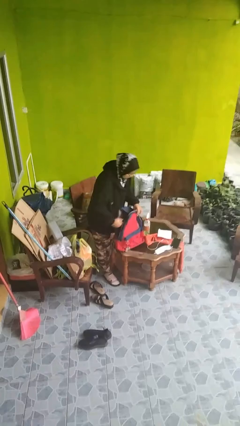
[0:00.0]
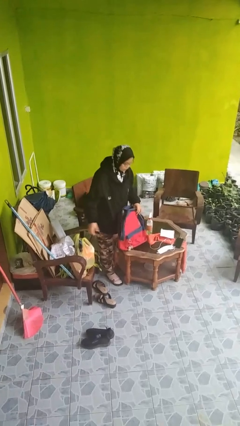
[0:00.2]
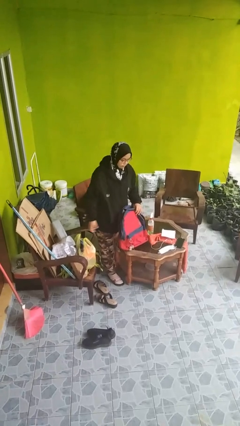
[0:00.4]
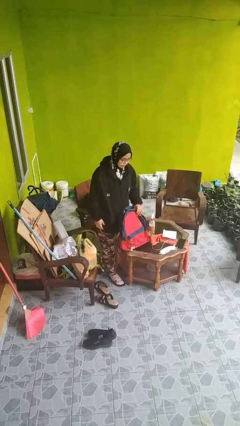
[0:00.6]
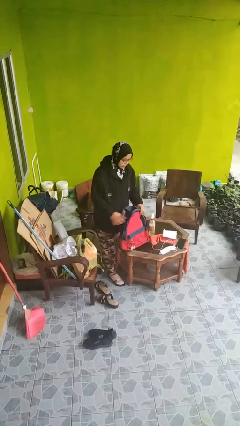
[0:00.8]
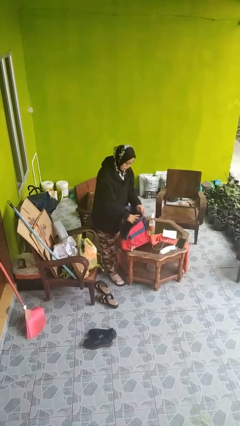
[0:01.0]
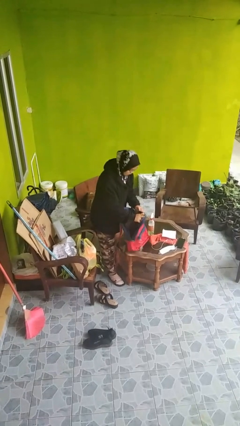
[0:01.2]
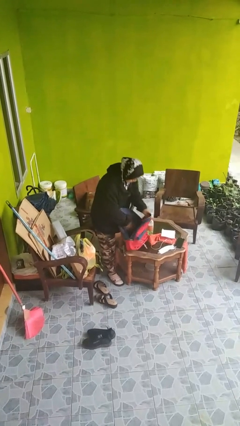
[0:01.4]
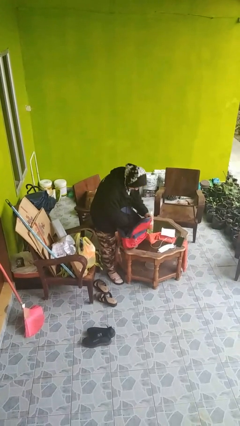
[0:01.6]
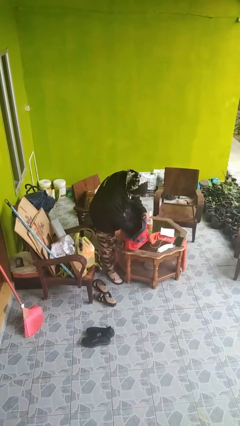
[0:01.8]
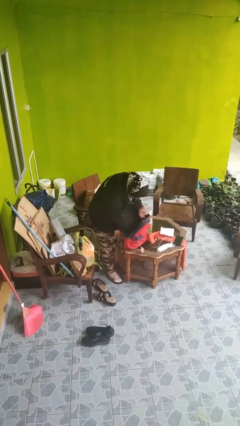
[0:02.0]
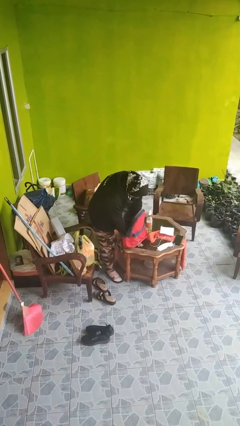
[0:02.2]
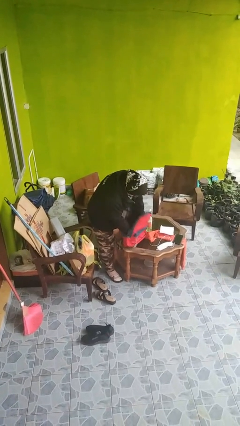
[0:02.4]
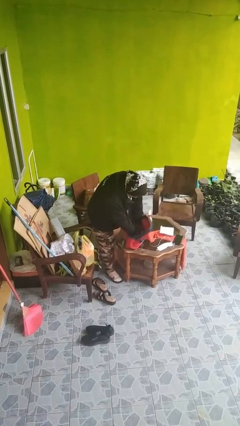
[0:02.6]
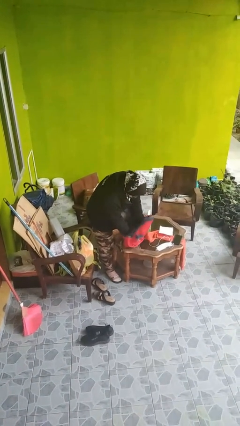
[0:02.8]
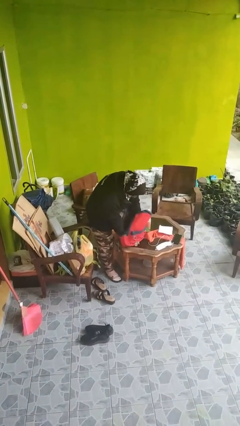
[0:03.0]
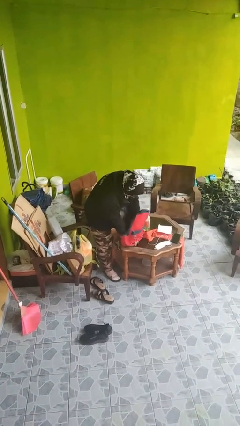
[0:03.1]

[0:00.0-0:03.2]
person searches in backpack

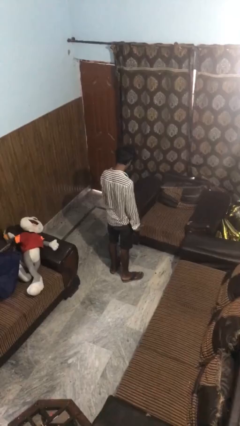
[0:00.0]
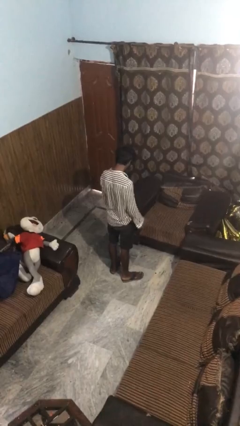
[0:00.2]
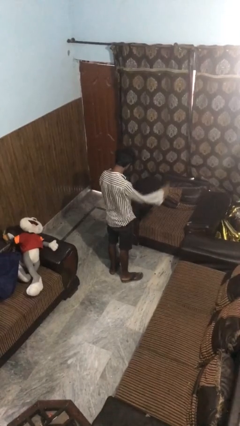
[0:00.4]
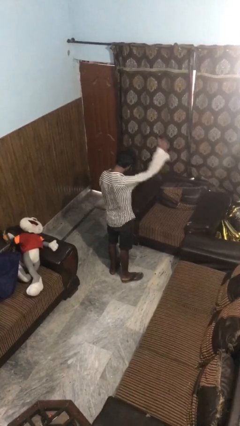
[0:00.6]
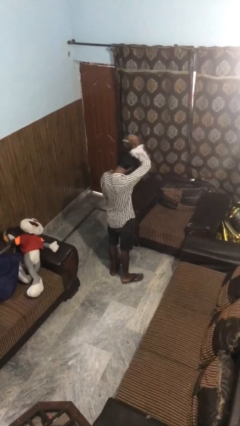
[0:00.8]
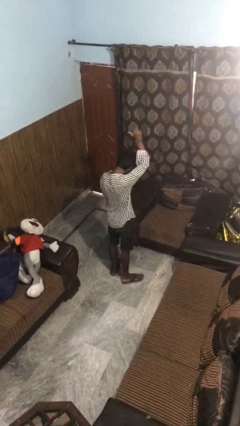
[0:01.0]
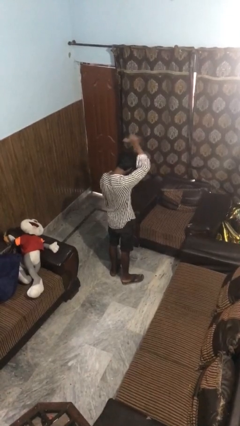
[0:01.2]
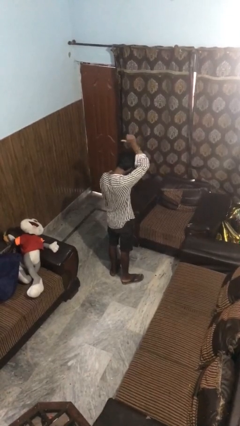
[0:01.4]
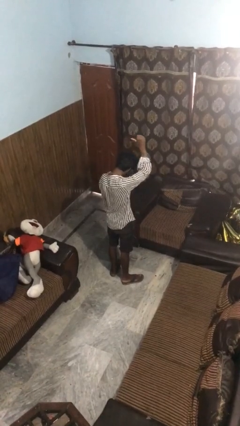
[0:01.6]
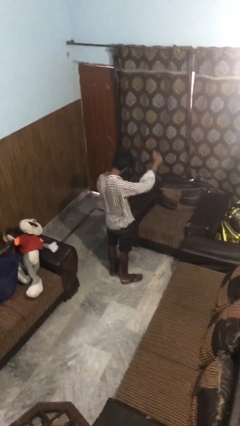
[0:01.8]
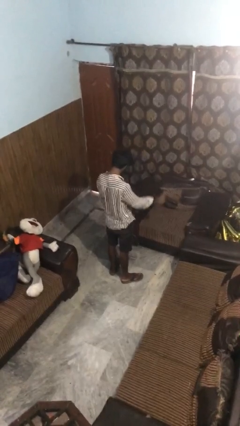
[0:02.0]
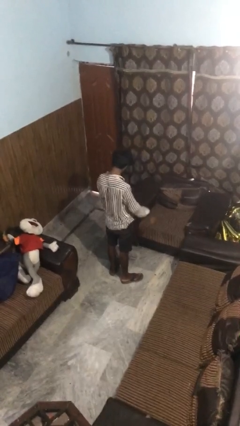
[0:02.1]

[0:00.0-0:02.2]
person gestures behind me

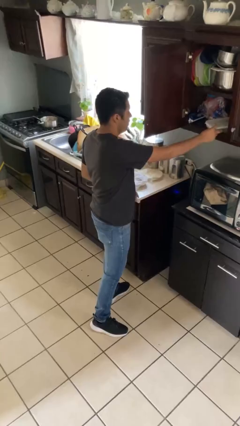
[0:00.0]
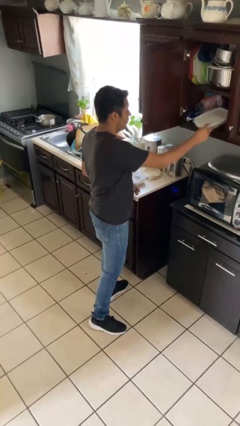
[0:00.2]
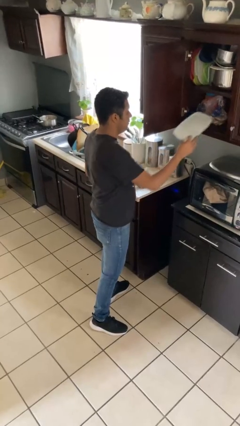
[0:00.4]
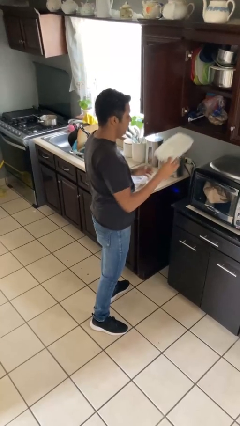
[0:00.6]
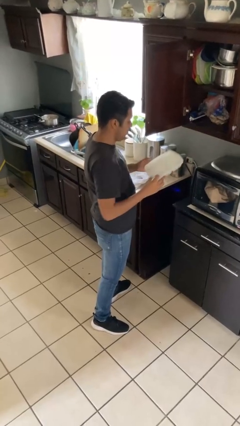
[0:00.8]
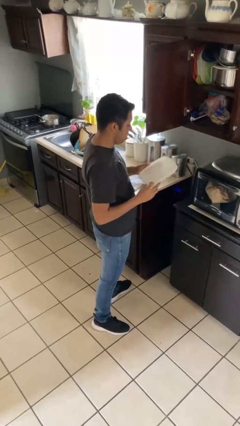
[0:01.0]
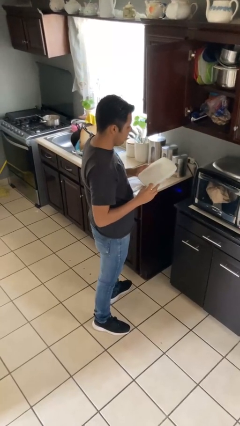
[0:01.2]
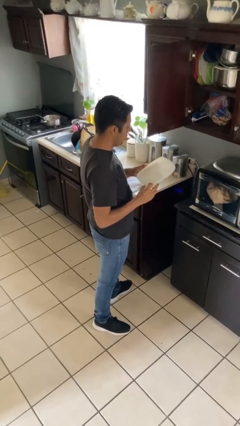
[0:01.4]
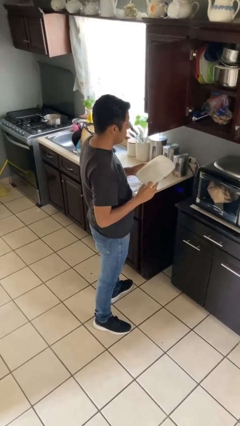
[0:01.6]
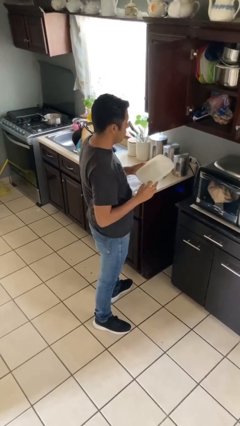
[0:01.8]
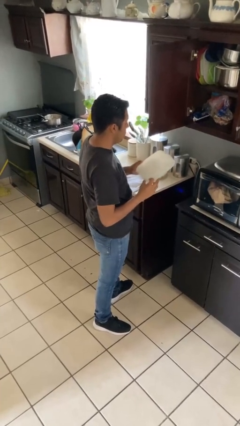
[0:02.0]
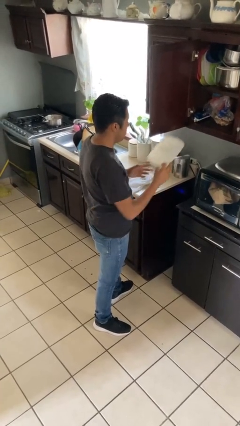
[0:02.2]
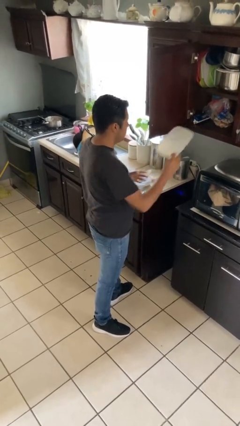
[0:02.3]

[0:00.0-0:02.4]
person picks up object from cabinet

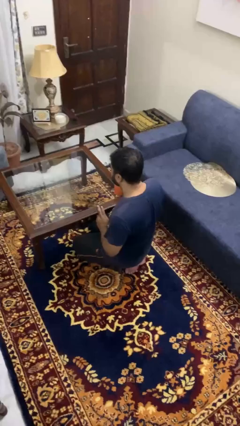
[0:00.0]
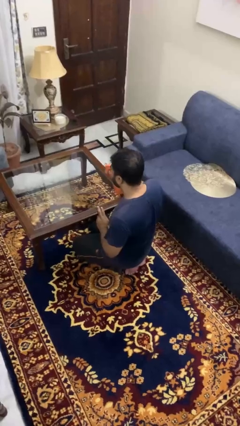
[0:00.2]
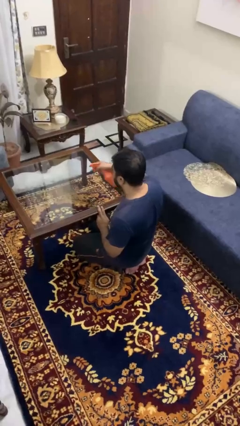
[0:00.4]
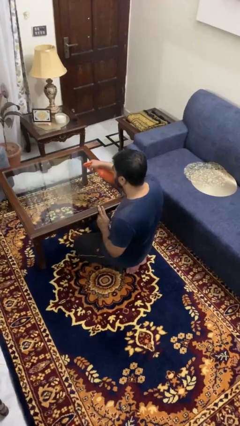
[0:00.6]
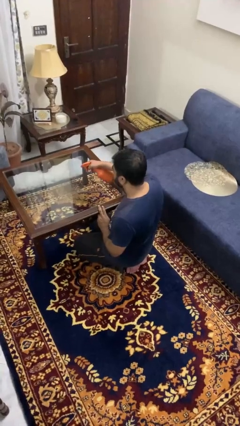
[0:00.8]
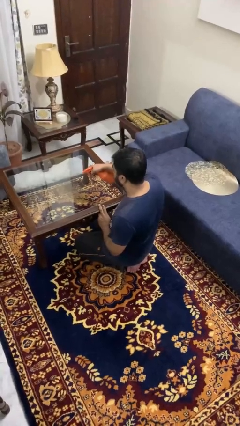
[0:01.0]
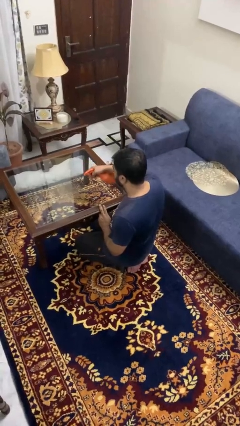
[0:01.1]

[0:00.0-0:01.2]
person sprays from bottle

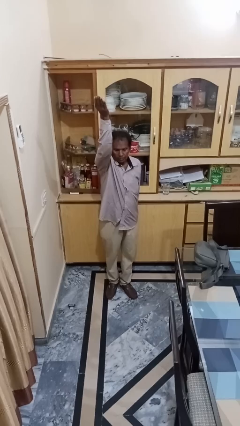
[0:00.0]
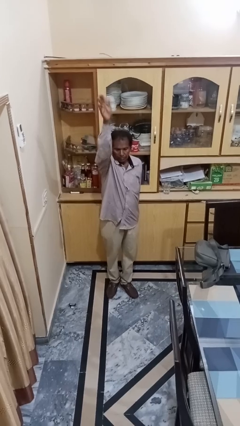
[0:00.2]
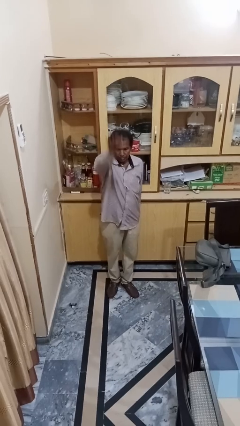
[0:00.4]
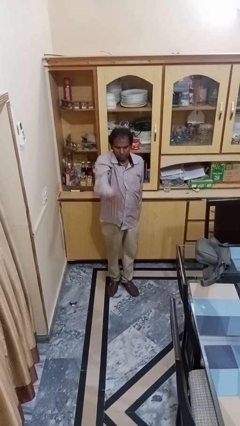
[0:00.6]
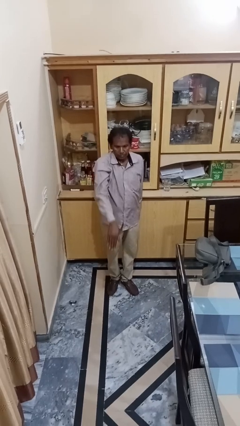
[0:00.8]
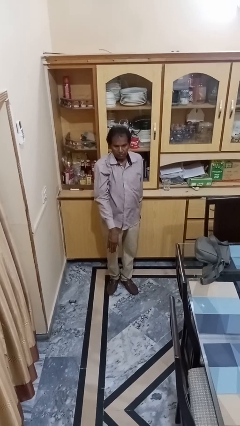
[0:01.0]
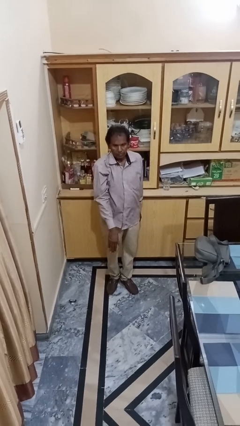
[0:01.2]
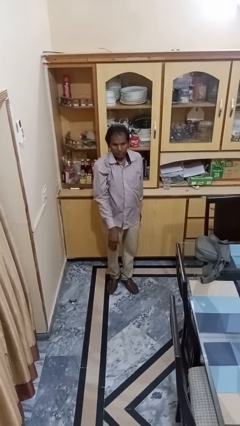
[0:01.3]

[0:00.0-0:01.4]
person gestures swipe down

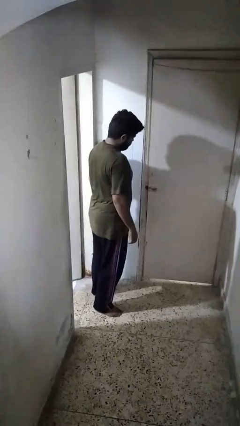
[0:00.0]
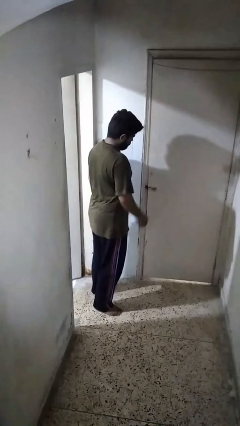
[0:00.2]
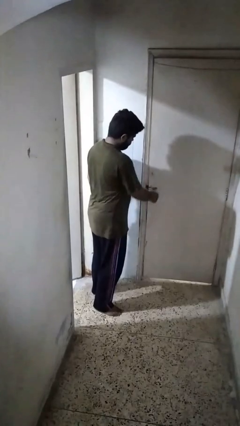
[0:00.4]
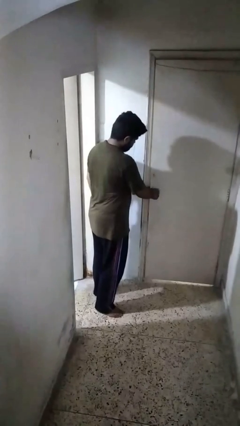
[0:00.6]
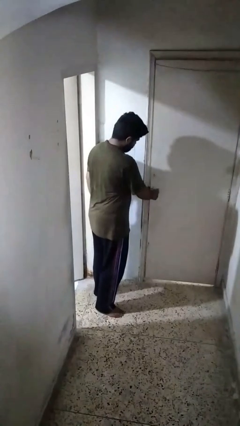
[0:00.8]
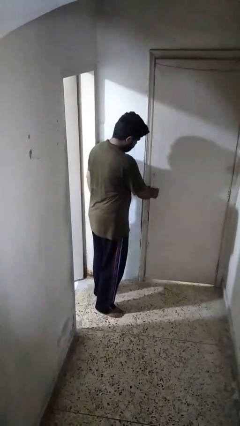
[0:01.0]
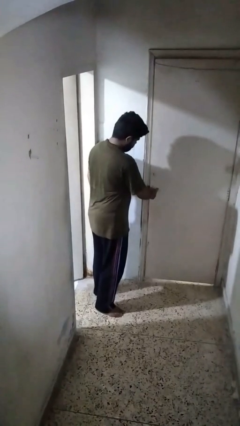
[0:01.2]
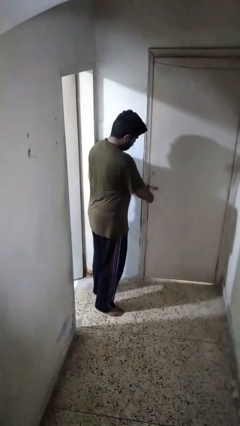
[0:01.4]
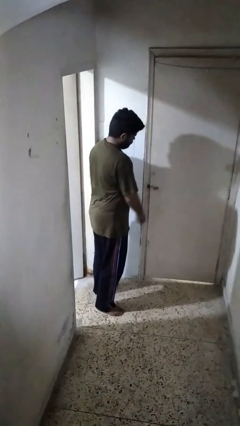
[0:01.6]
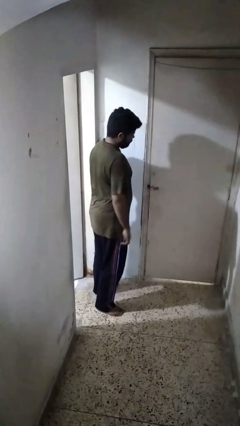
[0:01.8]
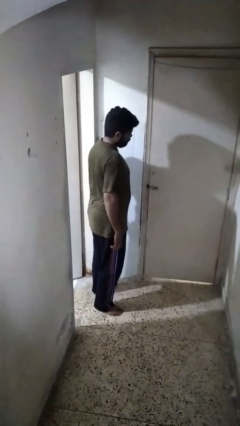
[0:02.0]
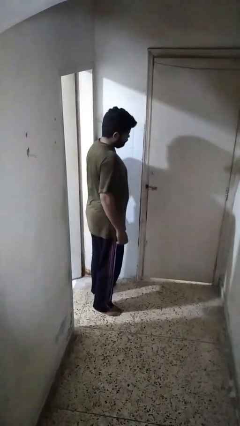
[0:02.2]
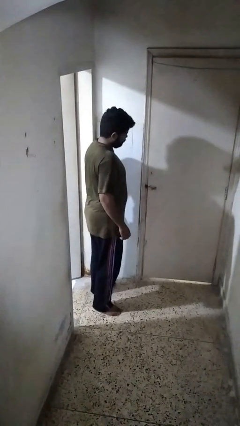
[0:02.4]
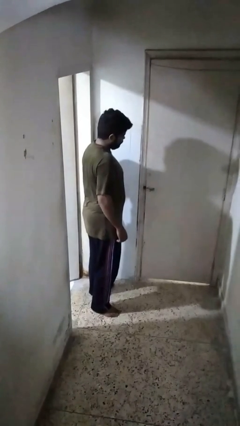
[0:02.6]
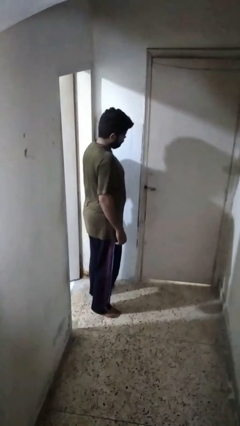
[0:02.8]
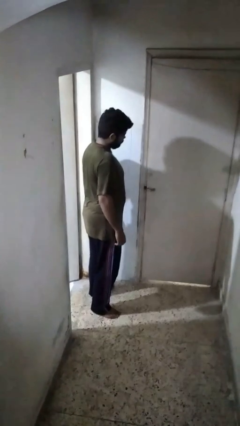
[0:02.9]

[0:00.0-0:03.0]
person locks door with keys

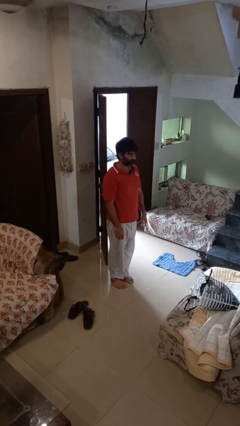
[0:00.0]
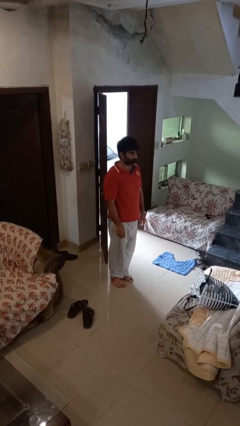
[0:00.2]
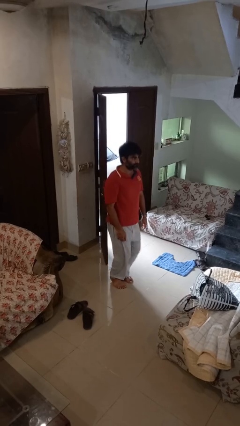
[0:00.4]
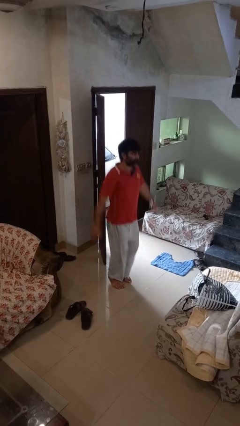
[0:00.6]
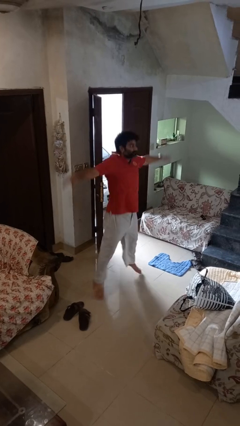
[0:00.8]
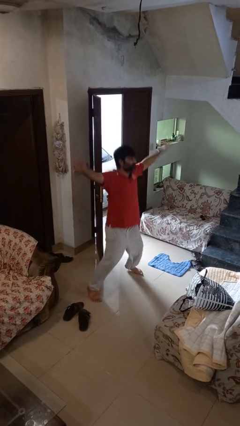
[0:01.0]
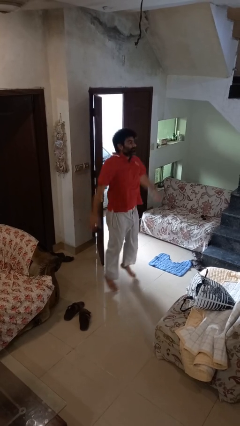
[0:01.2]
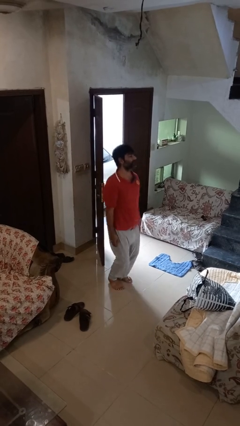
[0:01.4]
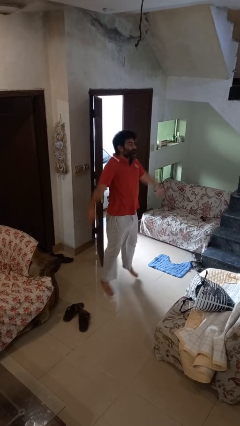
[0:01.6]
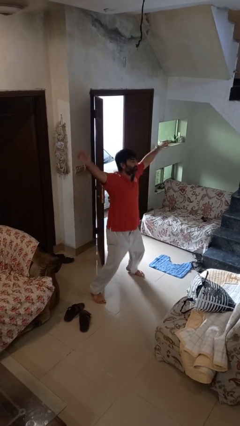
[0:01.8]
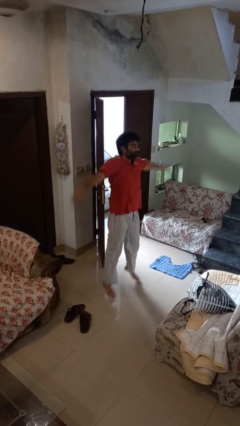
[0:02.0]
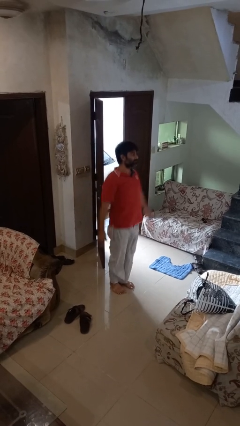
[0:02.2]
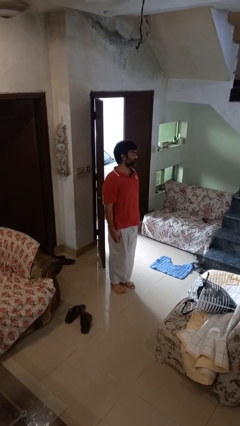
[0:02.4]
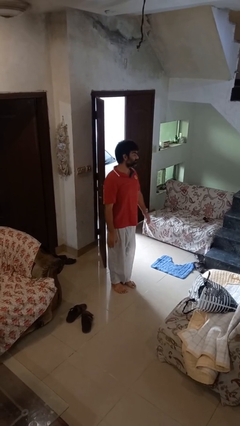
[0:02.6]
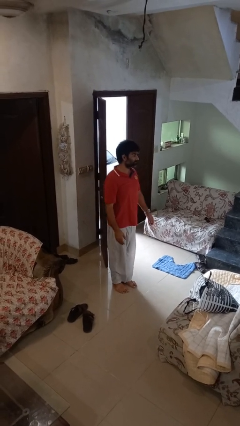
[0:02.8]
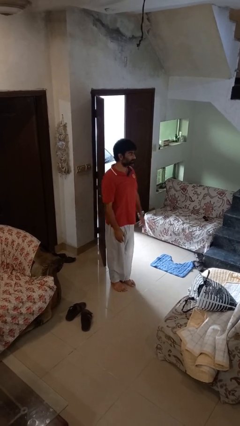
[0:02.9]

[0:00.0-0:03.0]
person exercises with jumping jacks

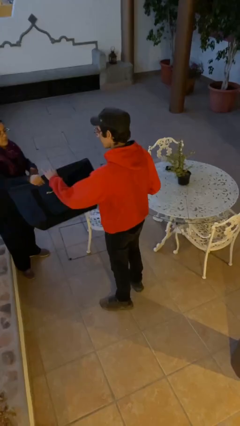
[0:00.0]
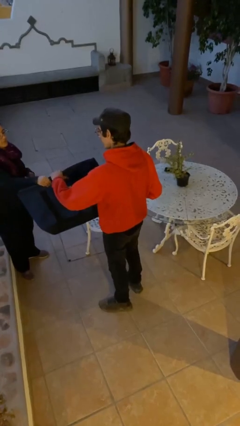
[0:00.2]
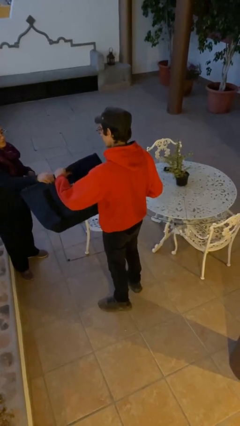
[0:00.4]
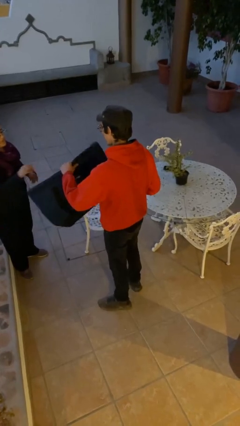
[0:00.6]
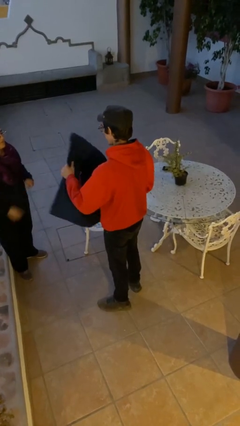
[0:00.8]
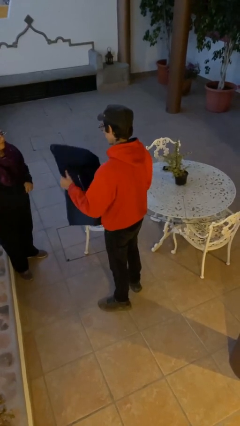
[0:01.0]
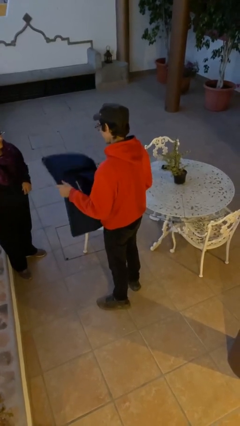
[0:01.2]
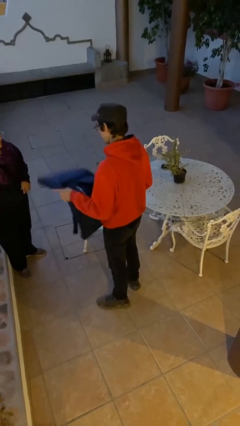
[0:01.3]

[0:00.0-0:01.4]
person transfers object to person
